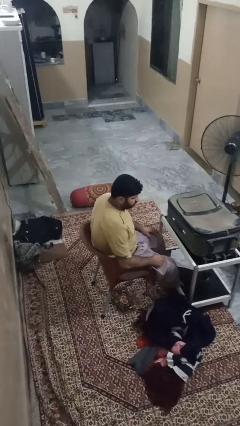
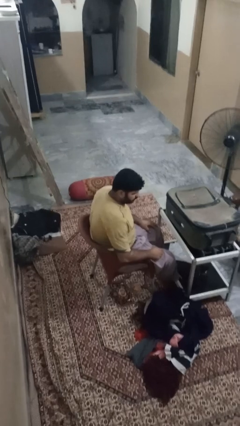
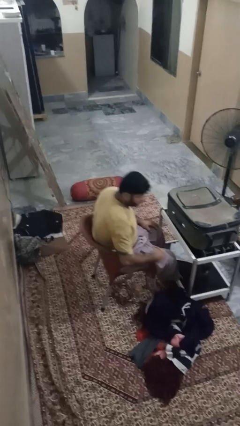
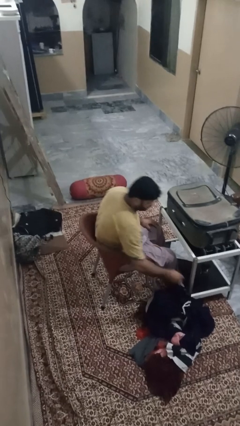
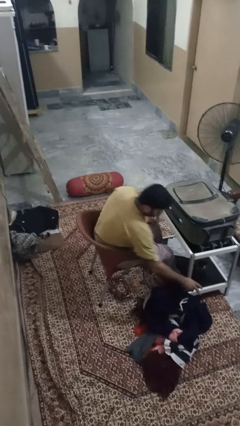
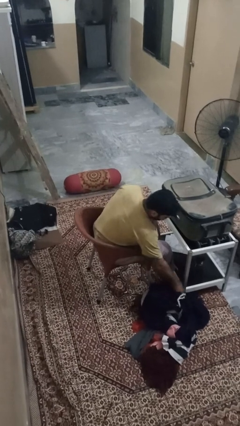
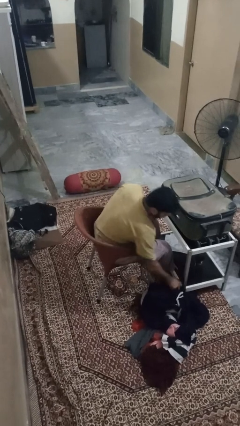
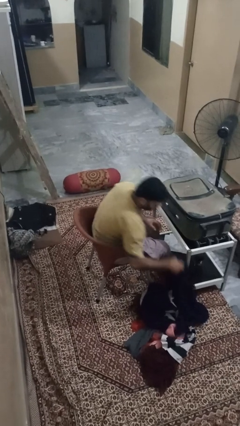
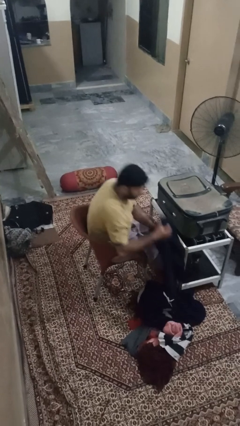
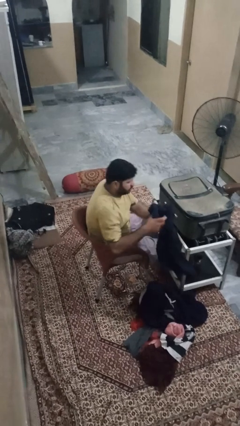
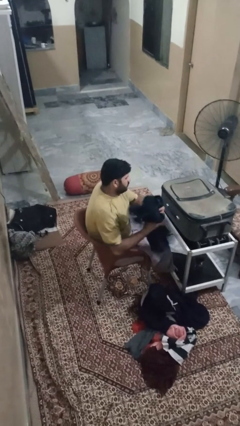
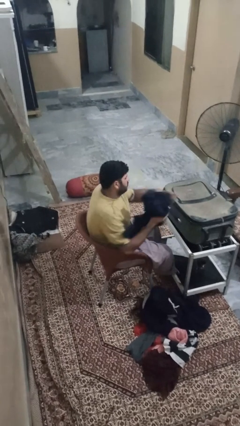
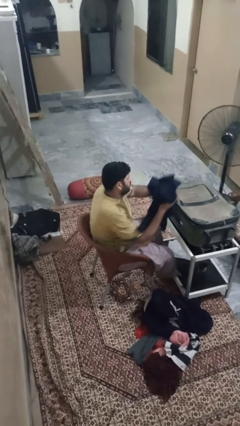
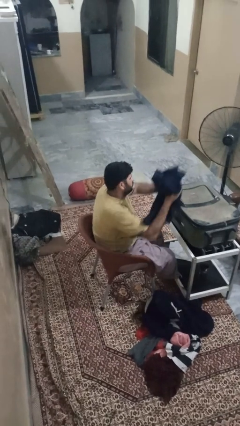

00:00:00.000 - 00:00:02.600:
person loads clothes into suitcase

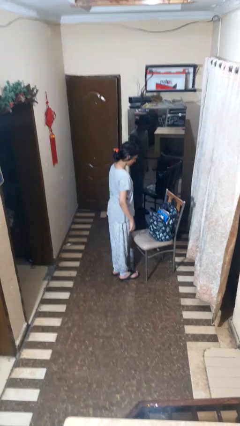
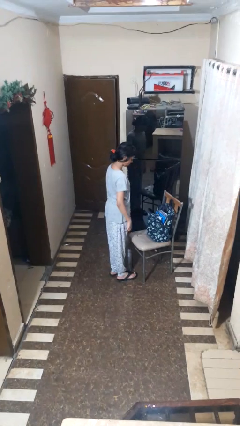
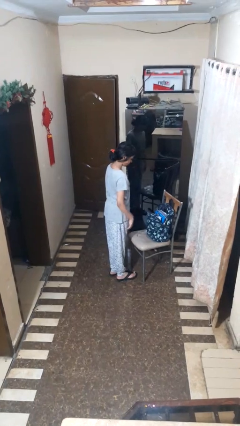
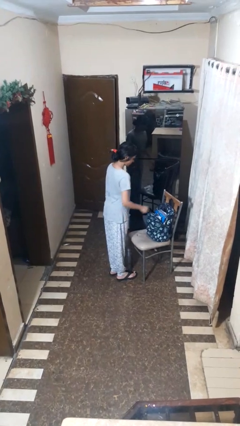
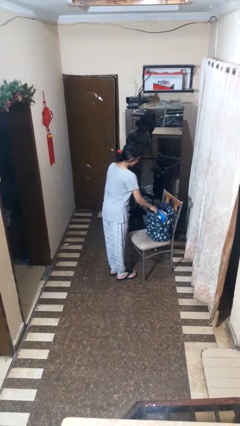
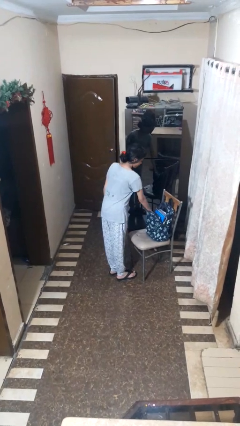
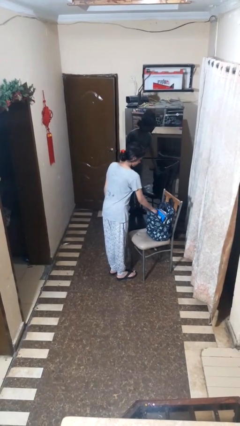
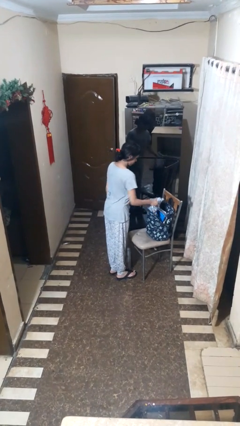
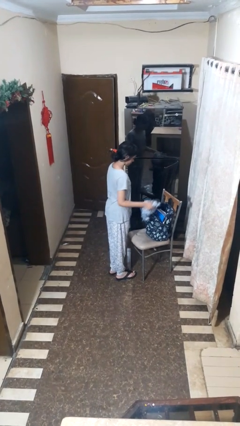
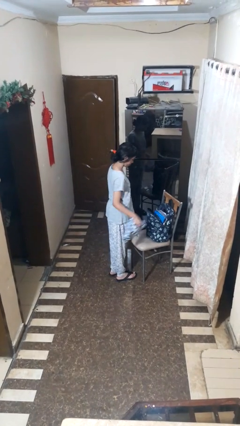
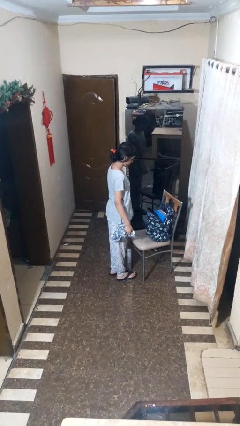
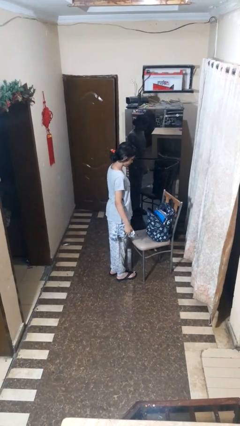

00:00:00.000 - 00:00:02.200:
person takes object from bag

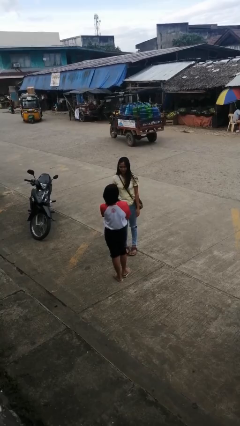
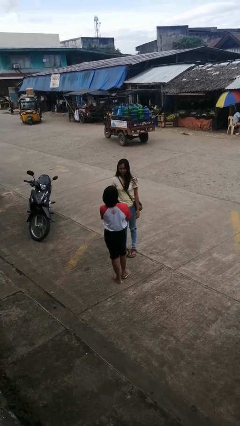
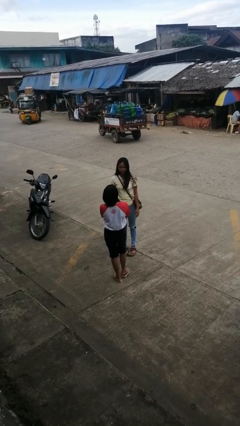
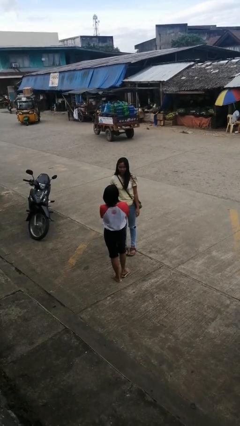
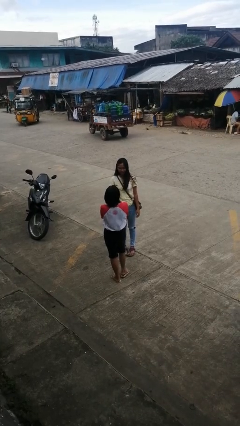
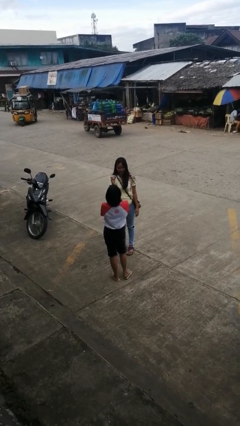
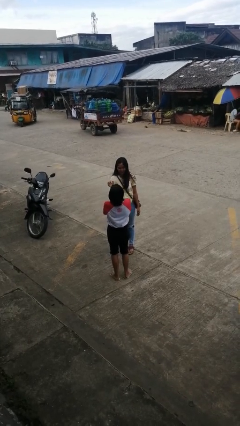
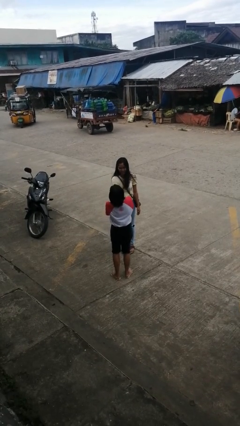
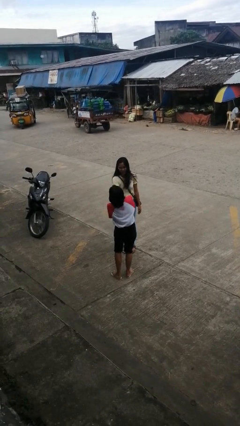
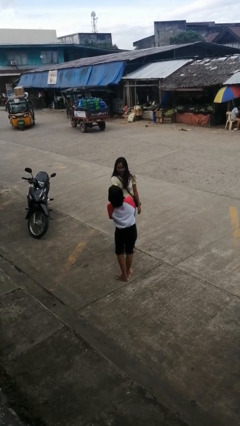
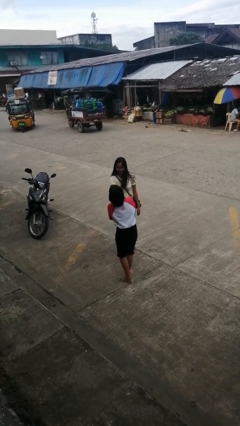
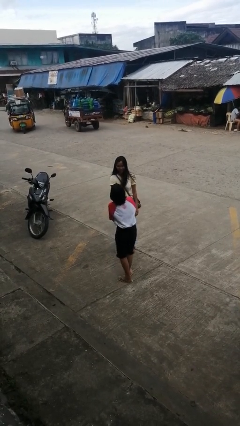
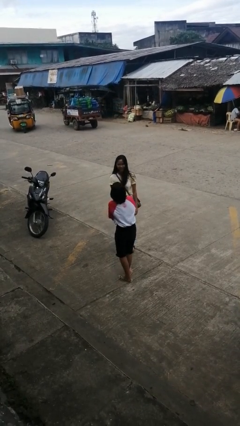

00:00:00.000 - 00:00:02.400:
person laughs with person

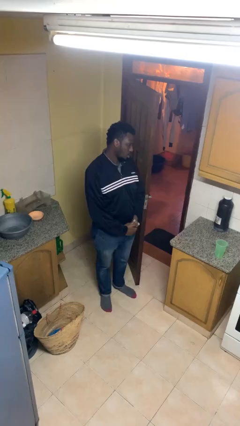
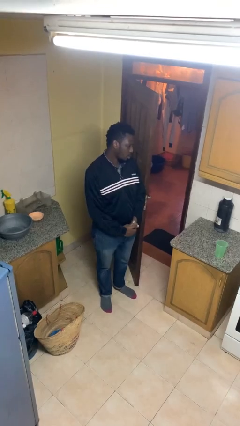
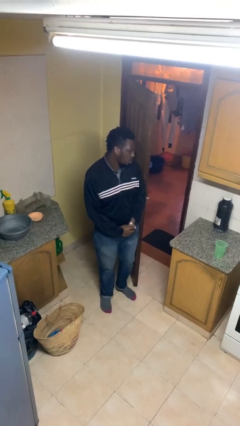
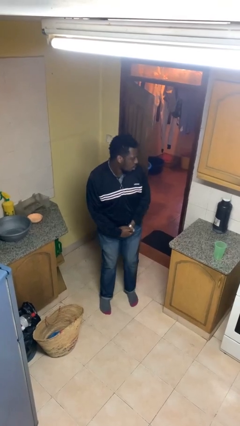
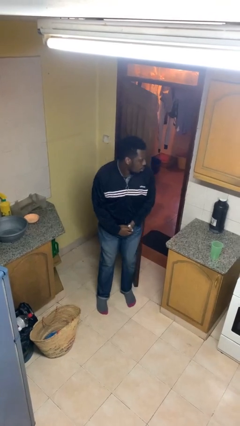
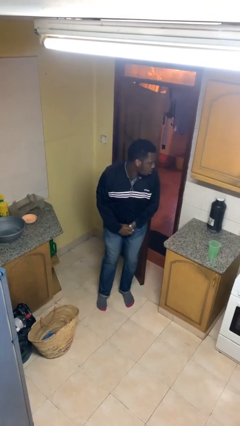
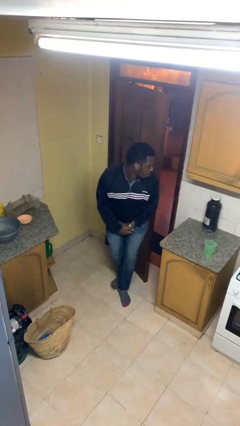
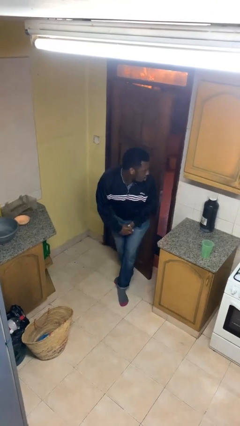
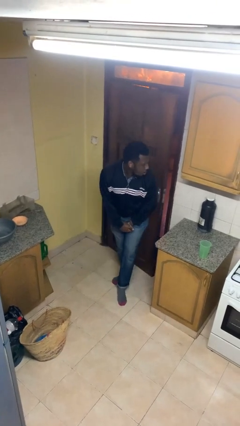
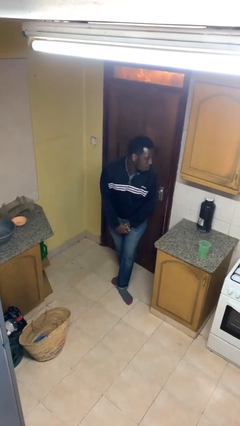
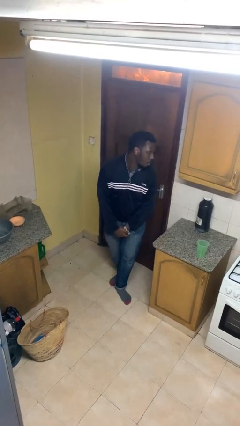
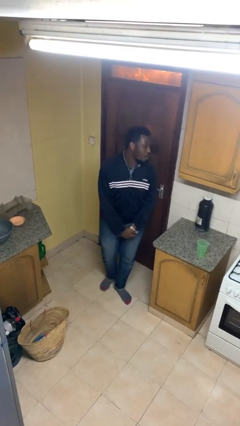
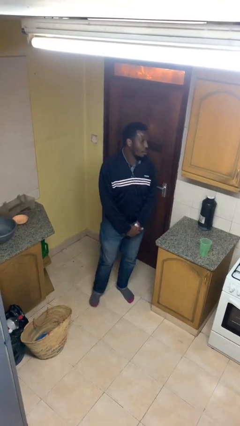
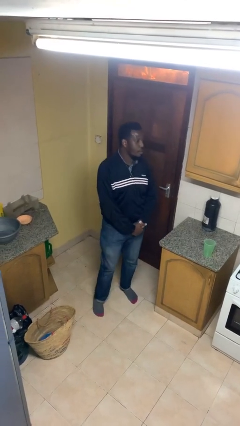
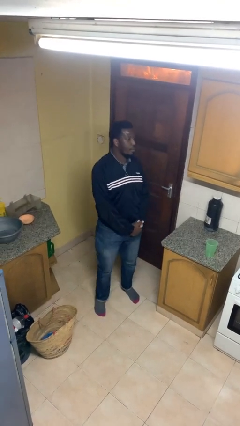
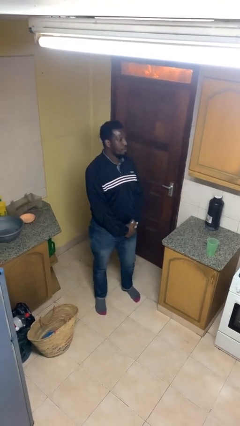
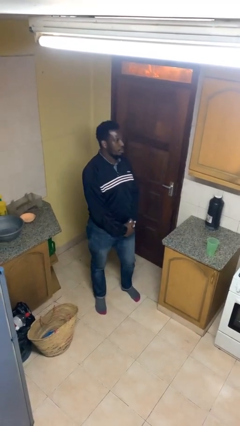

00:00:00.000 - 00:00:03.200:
person closes door with hip

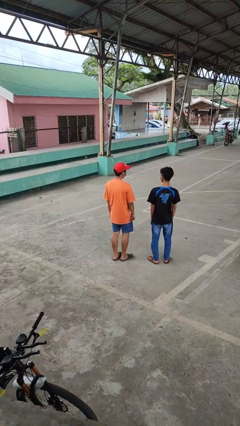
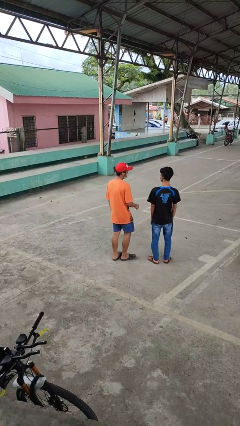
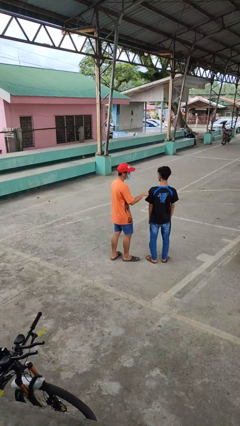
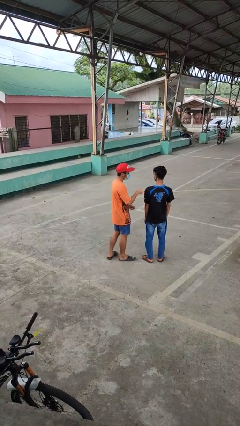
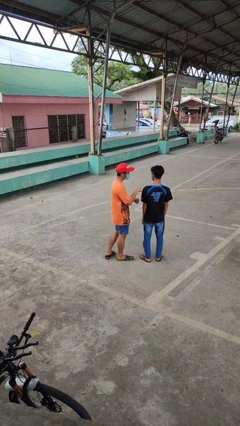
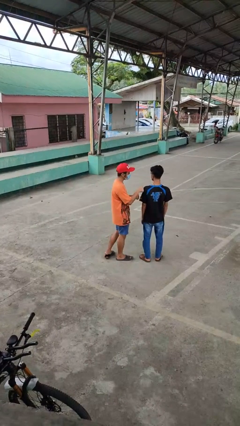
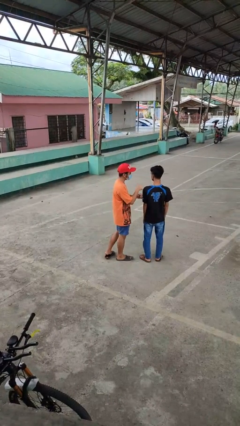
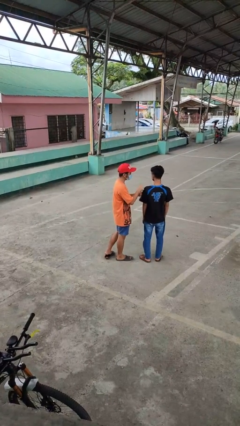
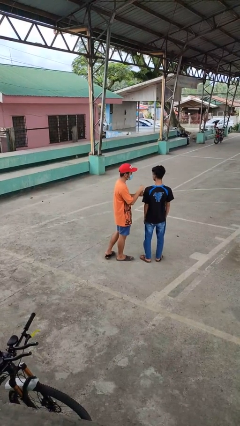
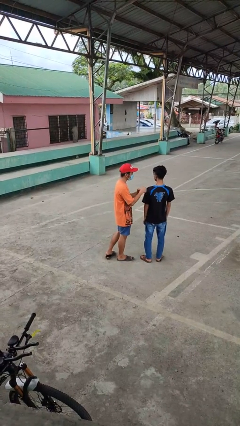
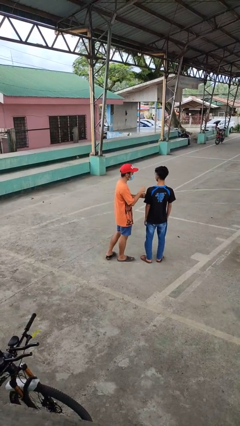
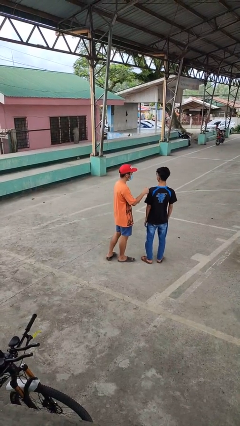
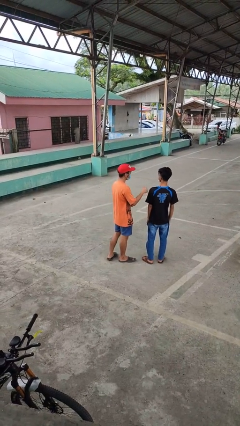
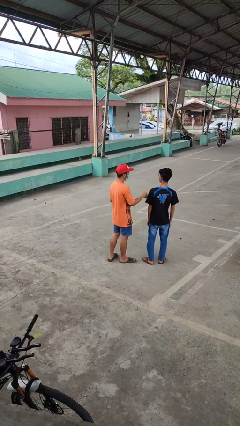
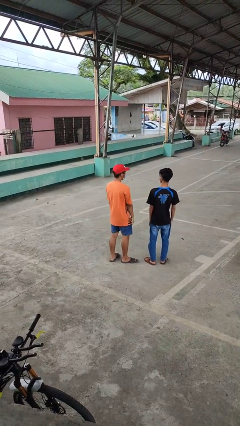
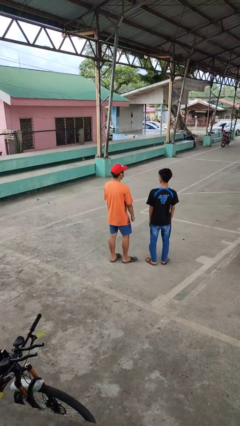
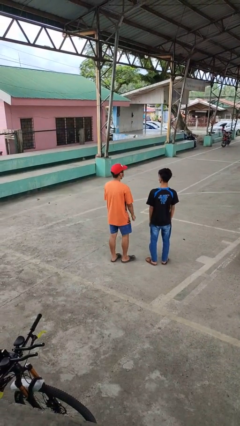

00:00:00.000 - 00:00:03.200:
person pounds shoulders of person

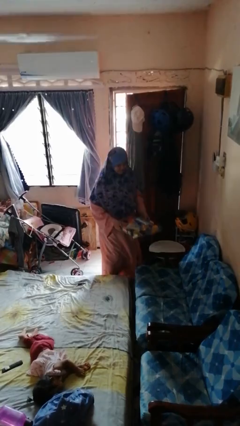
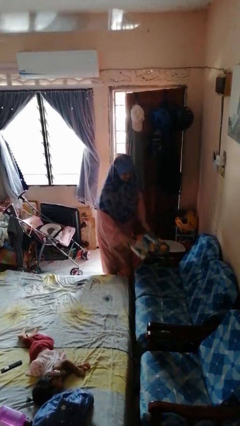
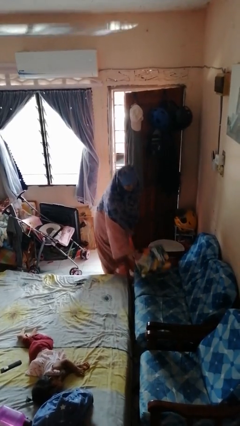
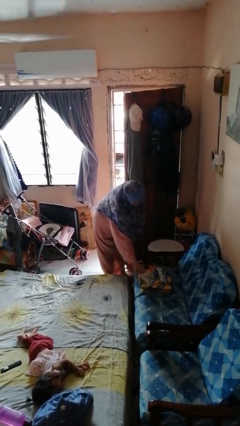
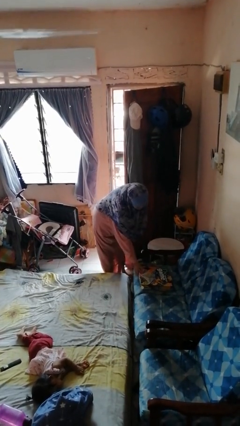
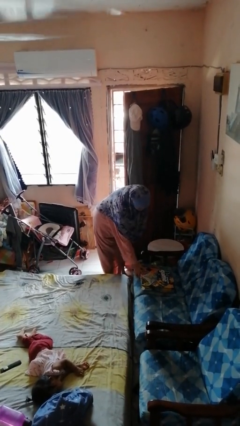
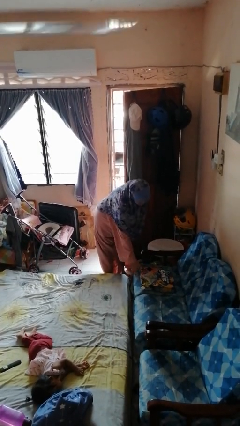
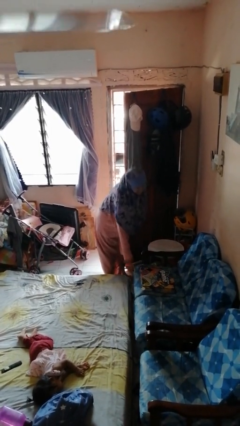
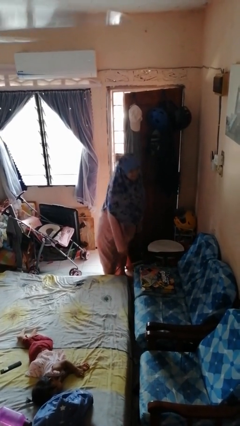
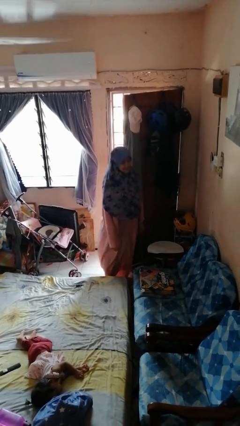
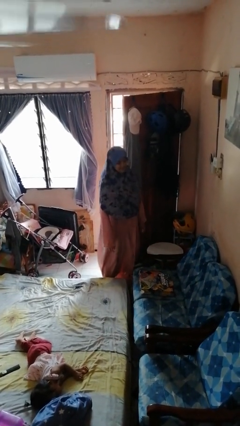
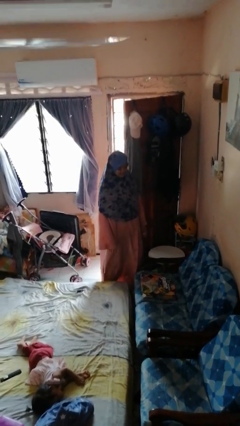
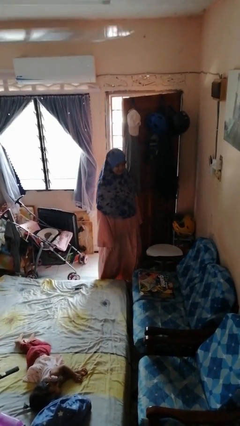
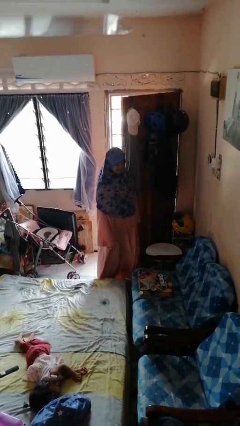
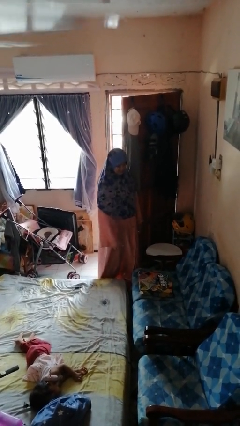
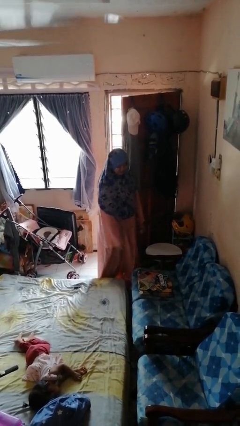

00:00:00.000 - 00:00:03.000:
person picks up object from couch

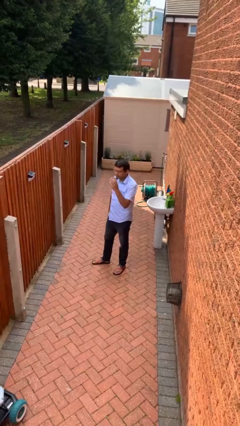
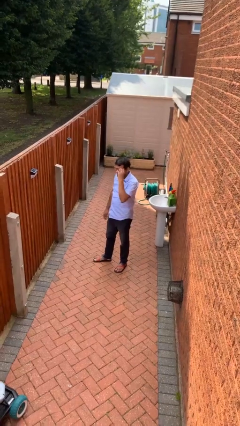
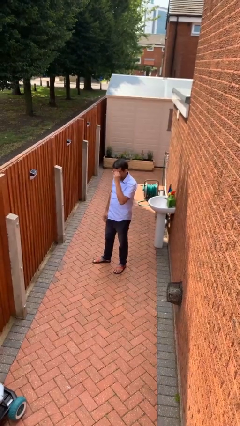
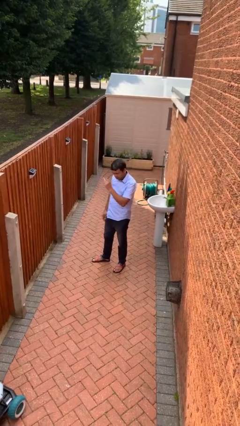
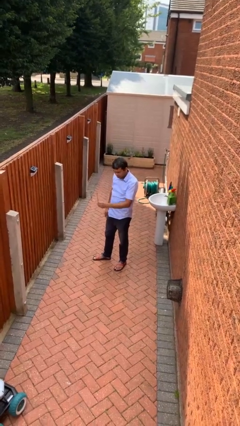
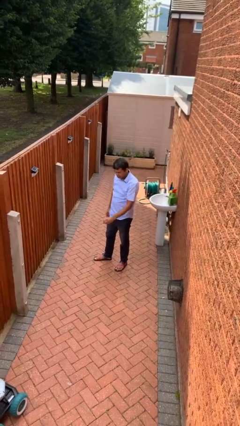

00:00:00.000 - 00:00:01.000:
person takes off glasses
